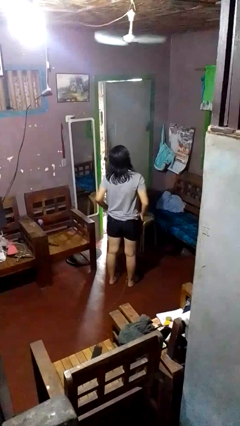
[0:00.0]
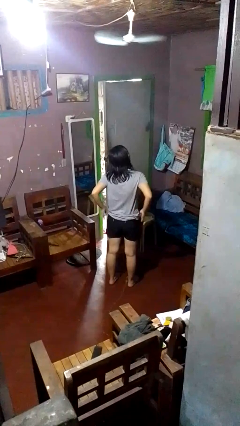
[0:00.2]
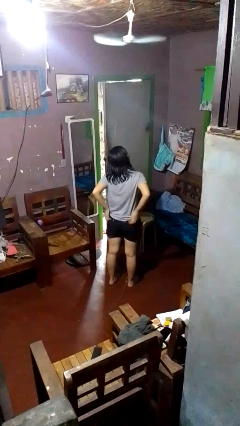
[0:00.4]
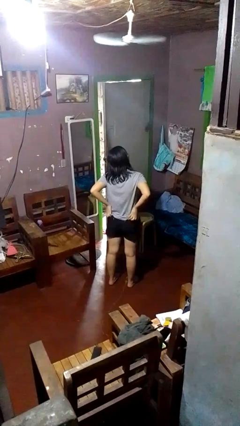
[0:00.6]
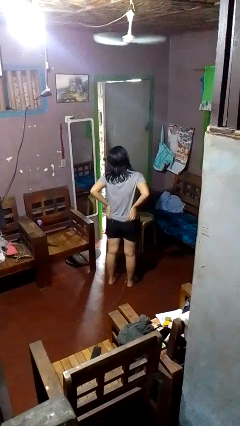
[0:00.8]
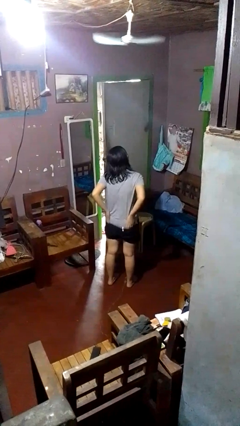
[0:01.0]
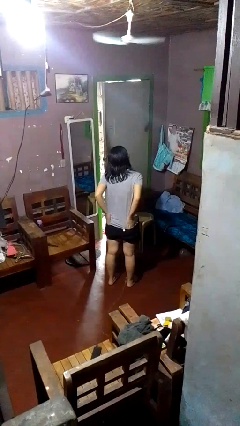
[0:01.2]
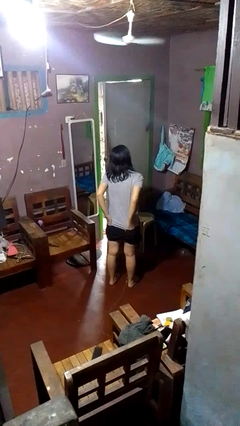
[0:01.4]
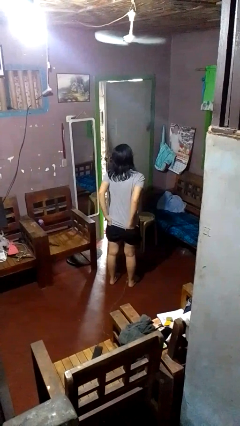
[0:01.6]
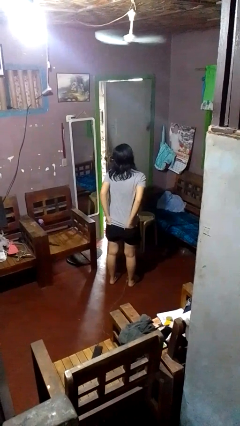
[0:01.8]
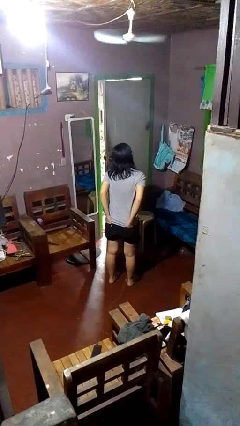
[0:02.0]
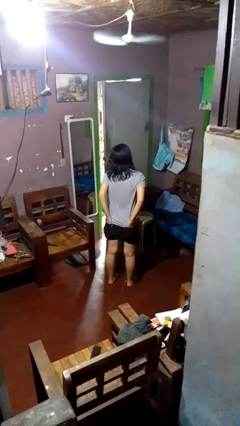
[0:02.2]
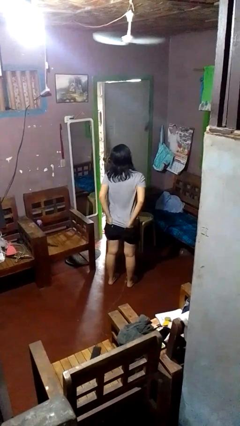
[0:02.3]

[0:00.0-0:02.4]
person puts hands in back pockets

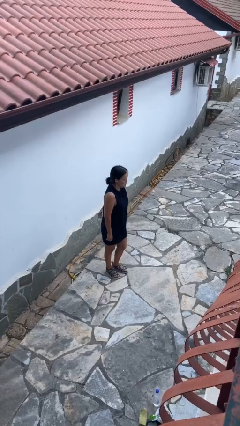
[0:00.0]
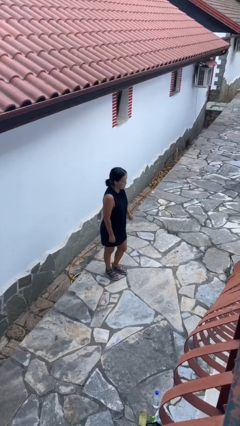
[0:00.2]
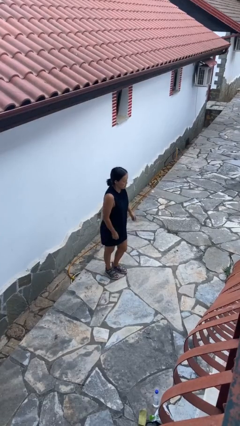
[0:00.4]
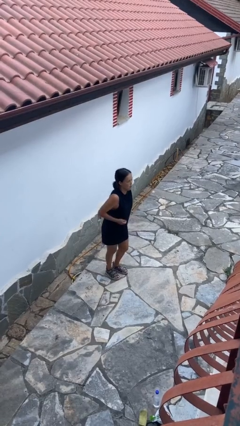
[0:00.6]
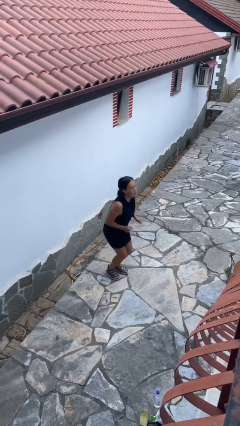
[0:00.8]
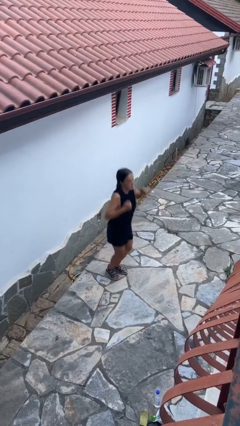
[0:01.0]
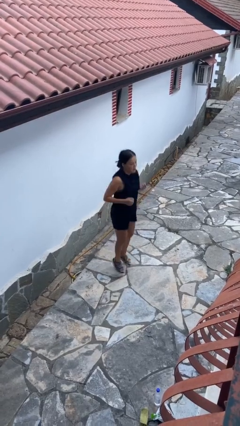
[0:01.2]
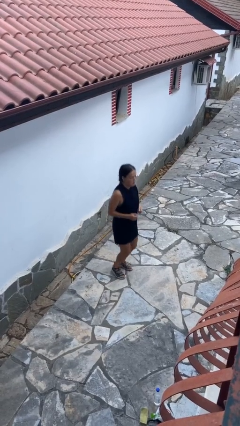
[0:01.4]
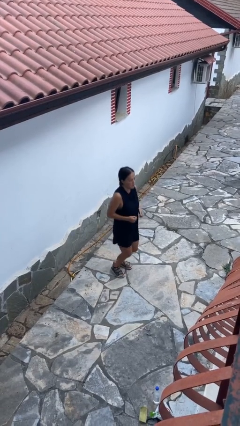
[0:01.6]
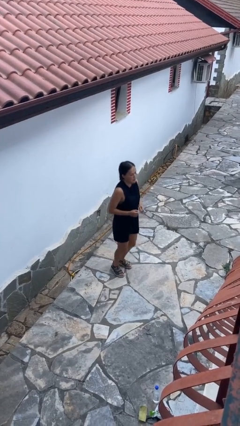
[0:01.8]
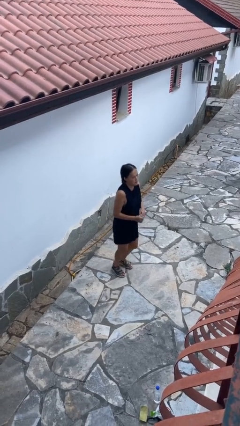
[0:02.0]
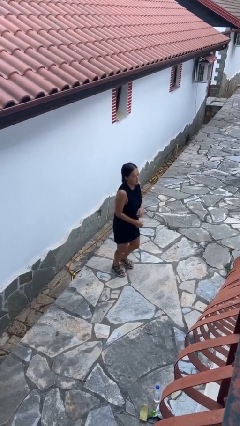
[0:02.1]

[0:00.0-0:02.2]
person jumps

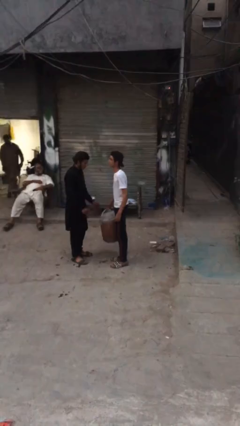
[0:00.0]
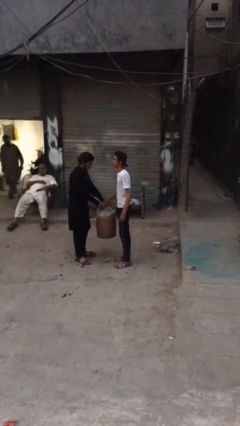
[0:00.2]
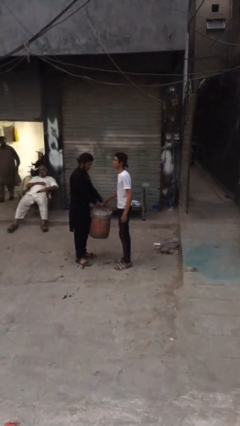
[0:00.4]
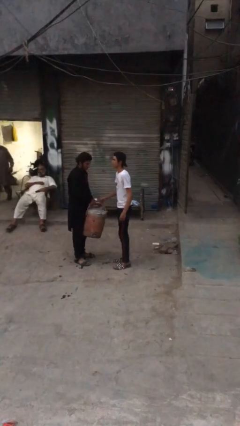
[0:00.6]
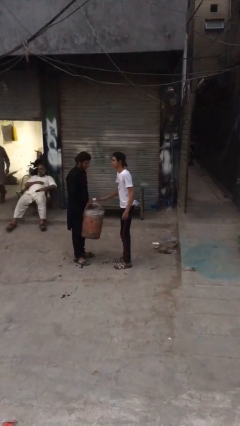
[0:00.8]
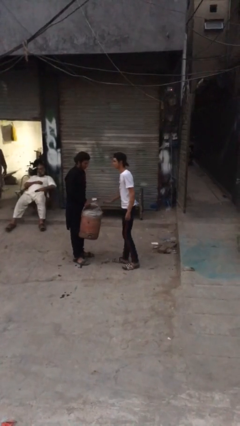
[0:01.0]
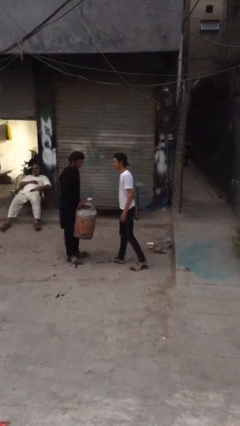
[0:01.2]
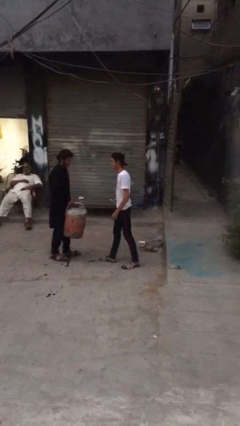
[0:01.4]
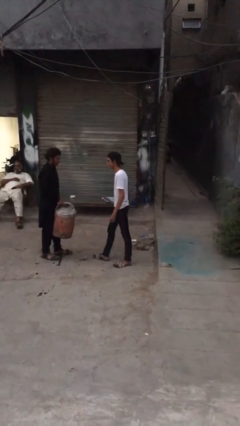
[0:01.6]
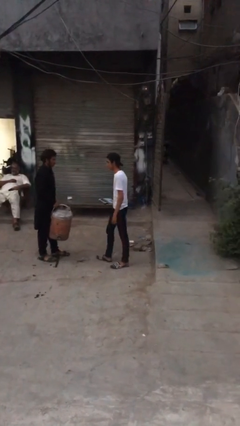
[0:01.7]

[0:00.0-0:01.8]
person transfers object to person

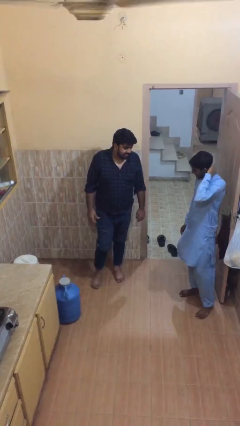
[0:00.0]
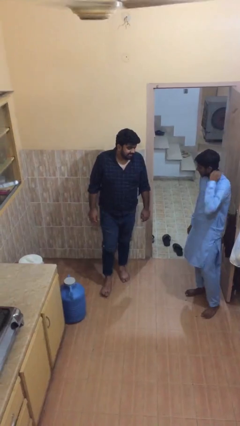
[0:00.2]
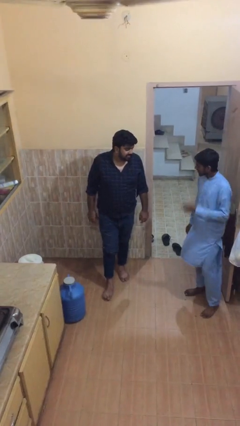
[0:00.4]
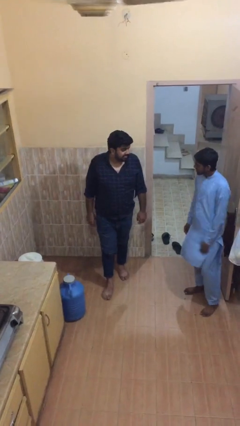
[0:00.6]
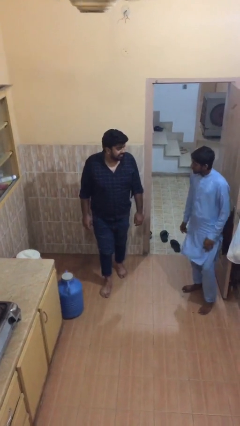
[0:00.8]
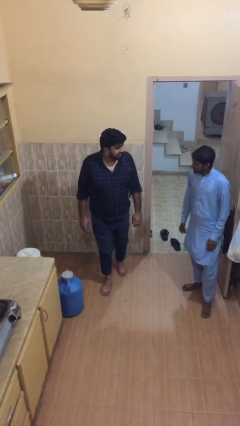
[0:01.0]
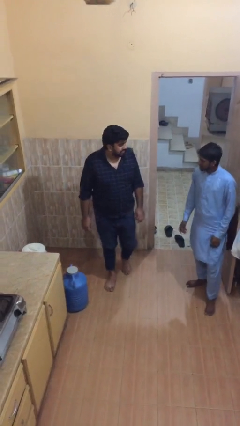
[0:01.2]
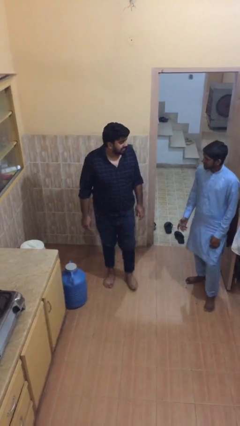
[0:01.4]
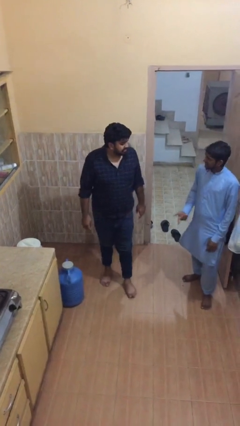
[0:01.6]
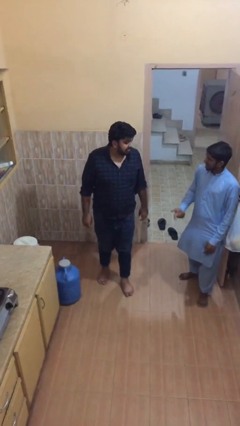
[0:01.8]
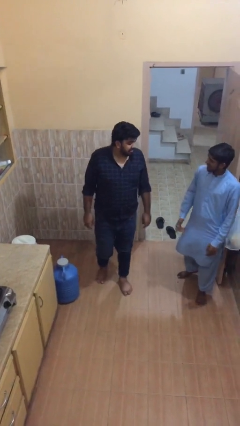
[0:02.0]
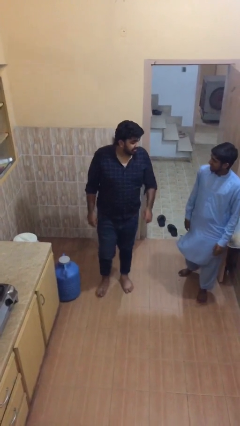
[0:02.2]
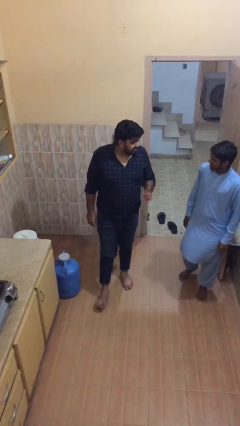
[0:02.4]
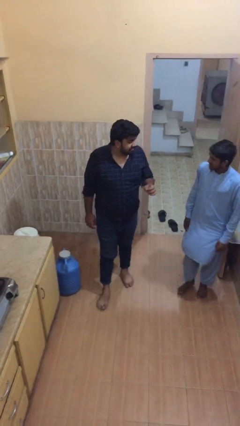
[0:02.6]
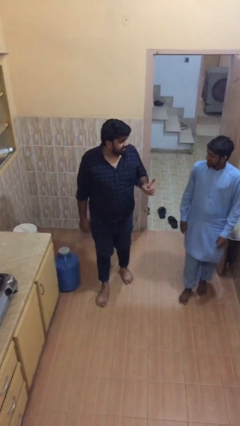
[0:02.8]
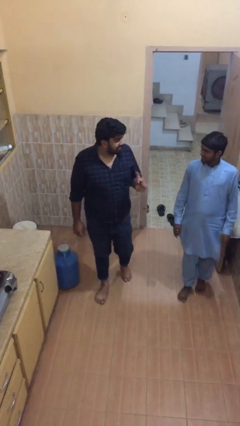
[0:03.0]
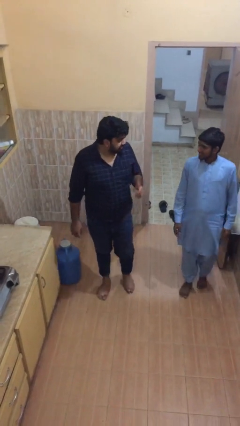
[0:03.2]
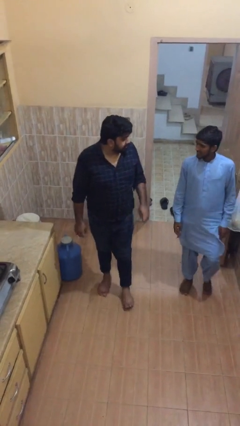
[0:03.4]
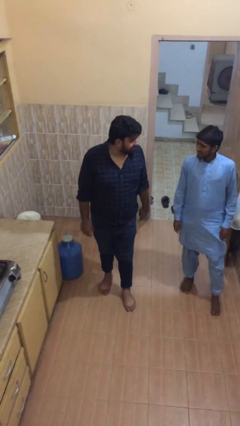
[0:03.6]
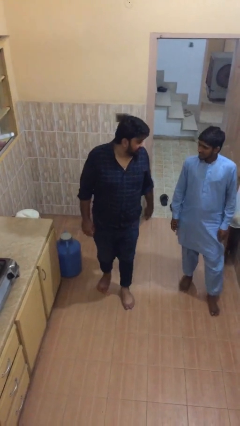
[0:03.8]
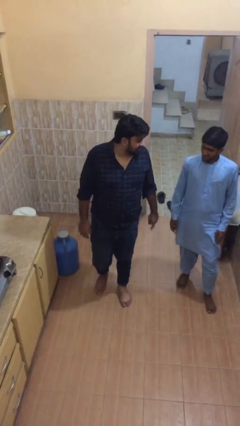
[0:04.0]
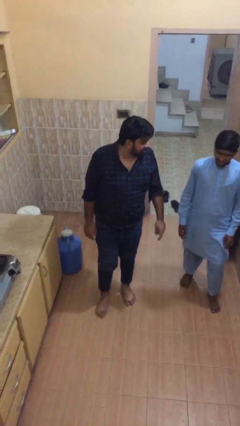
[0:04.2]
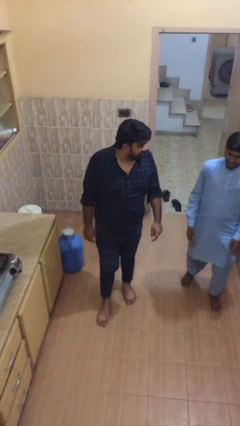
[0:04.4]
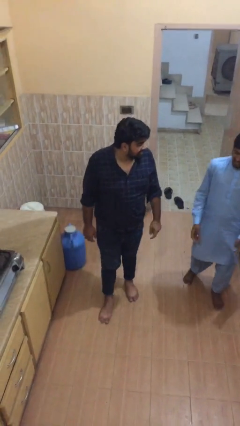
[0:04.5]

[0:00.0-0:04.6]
person talks to person

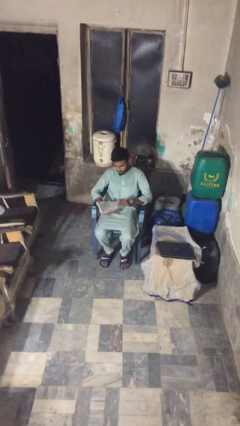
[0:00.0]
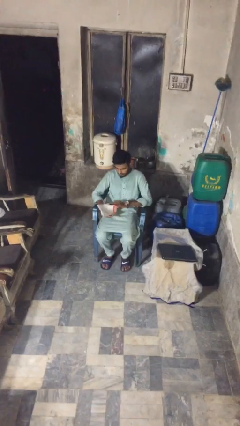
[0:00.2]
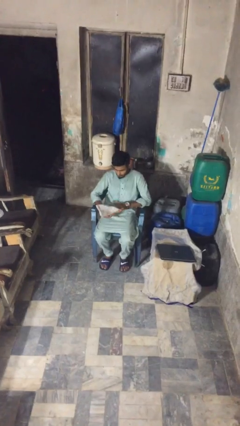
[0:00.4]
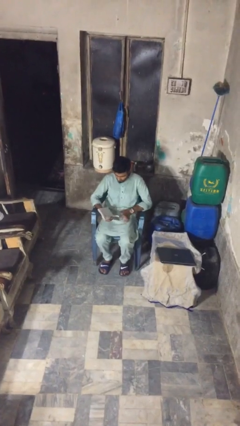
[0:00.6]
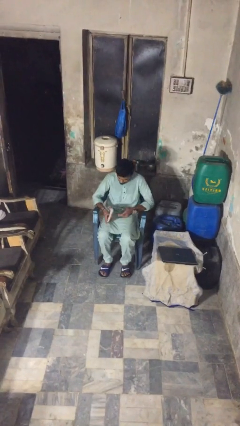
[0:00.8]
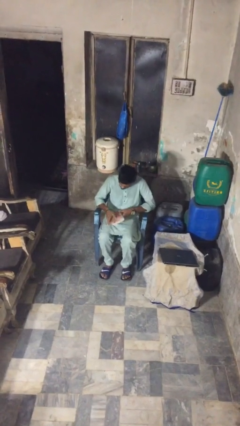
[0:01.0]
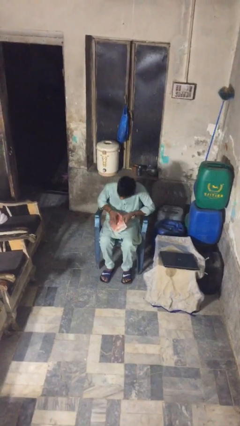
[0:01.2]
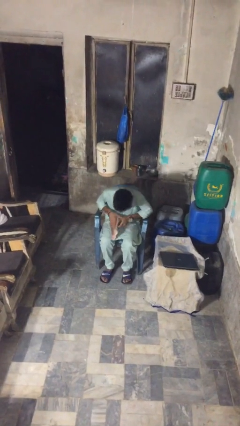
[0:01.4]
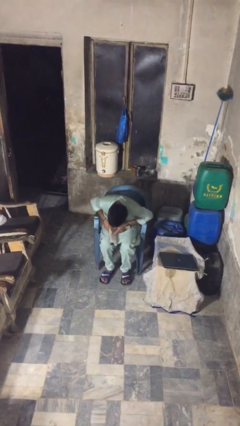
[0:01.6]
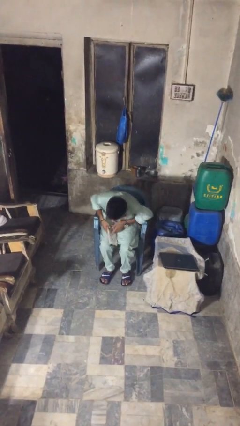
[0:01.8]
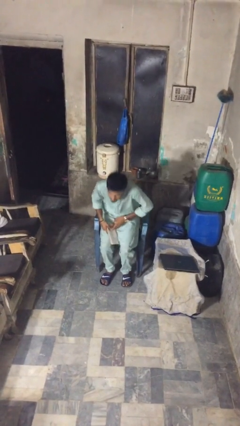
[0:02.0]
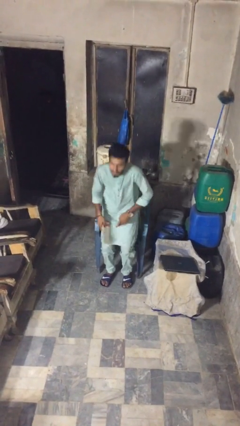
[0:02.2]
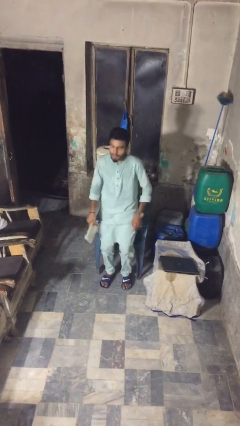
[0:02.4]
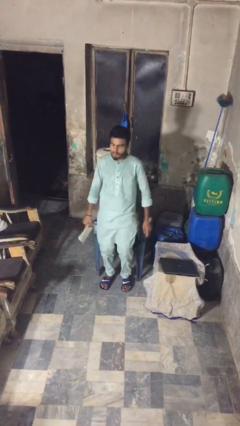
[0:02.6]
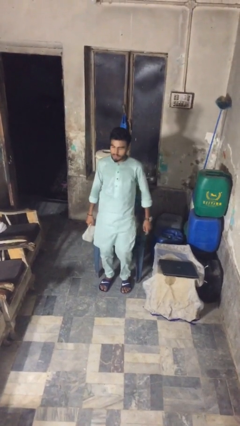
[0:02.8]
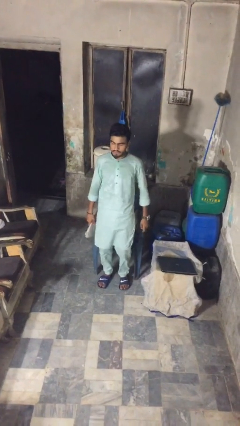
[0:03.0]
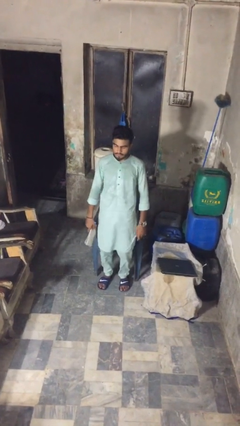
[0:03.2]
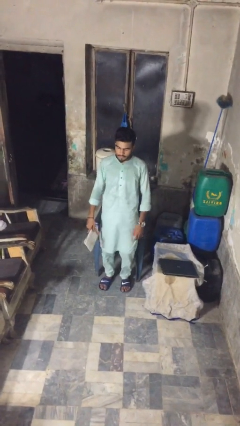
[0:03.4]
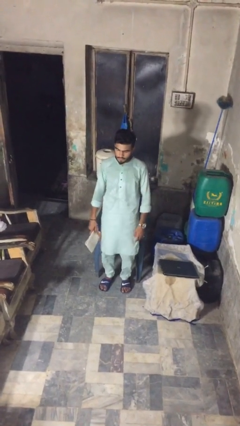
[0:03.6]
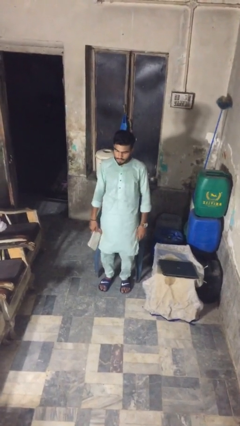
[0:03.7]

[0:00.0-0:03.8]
person stands up

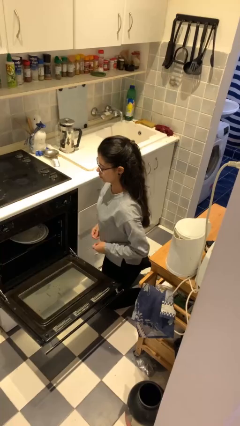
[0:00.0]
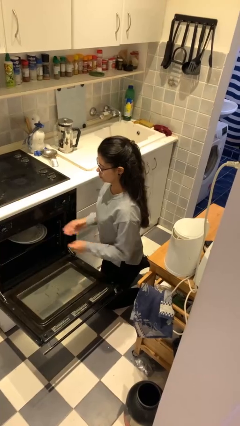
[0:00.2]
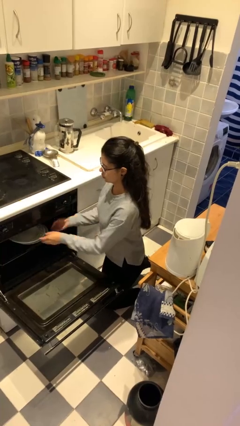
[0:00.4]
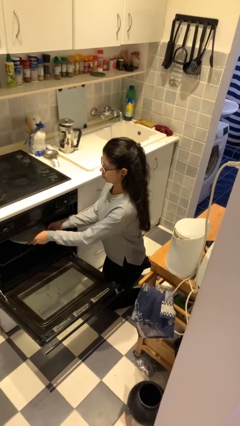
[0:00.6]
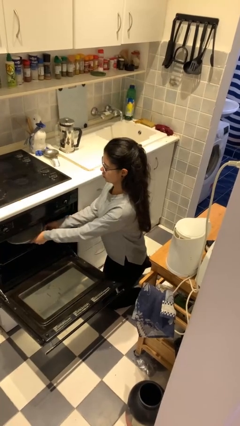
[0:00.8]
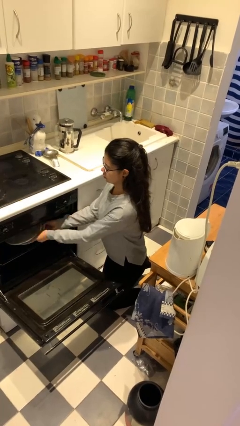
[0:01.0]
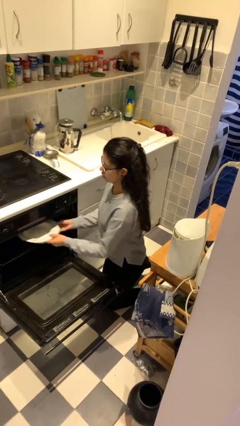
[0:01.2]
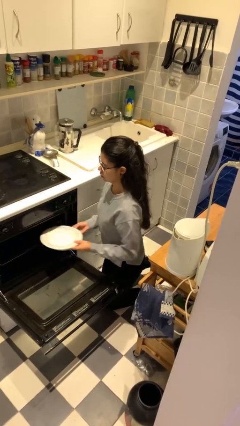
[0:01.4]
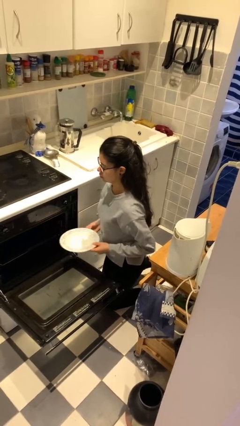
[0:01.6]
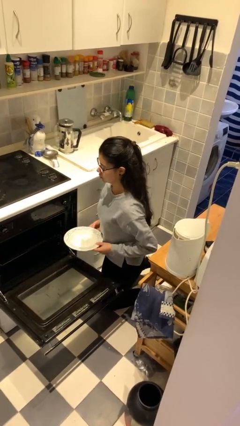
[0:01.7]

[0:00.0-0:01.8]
person unloads dishwasher

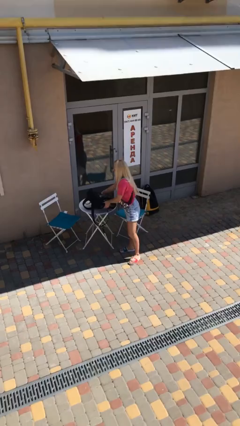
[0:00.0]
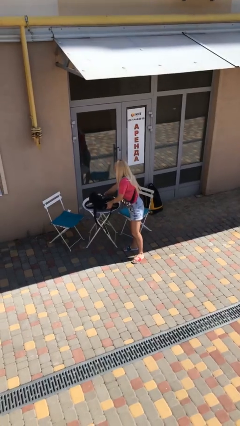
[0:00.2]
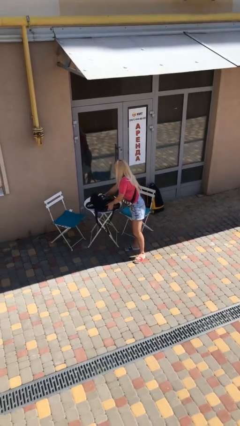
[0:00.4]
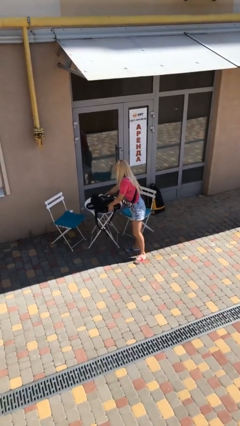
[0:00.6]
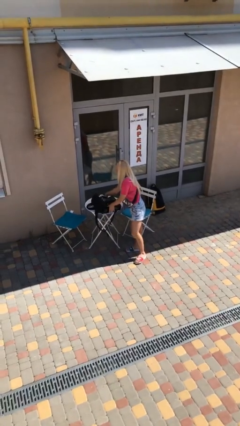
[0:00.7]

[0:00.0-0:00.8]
person puts down object on table
